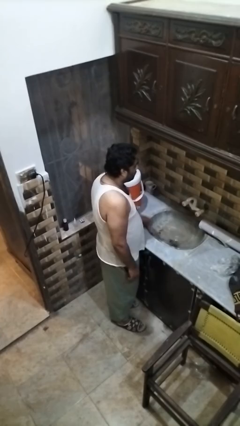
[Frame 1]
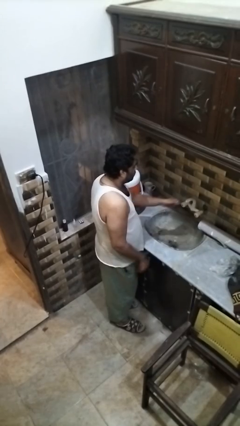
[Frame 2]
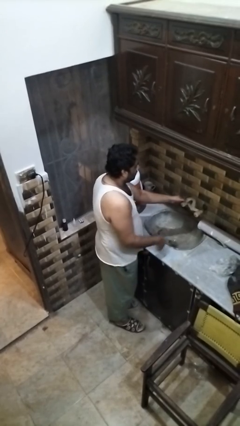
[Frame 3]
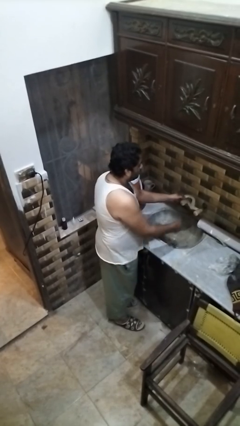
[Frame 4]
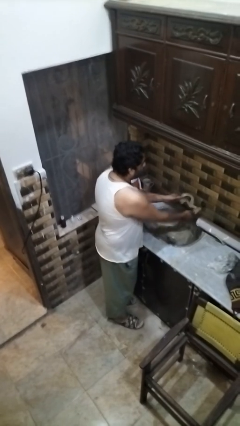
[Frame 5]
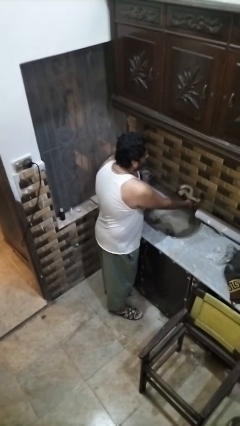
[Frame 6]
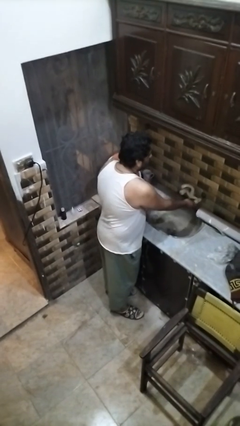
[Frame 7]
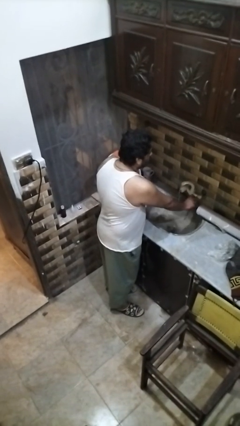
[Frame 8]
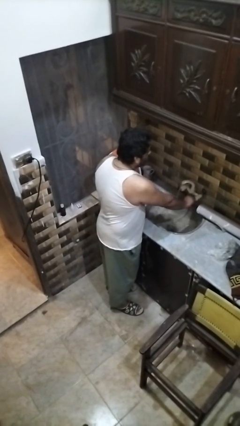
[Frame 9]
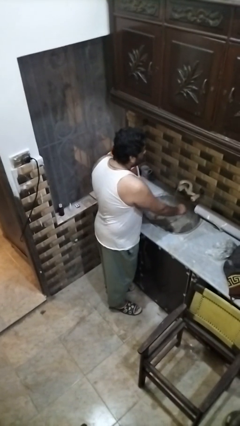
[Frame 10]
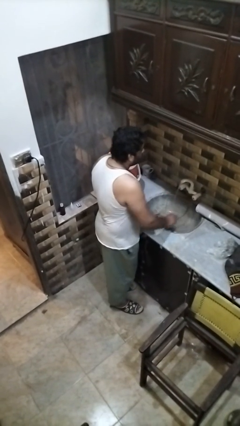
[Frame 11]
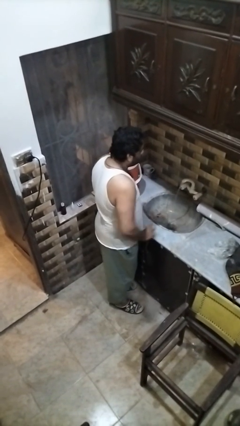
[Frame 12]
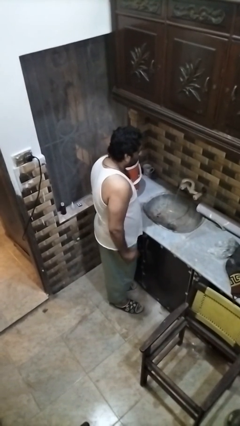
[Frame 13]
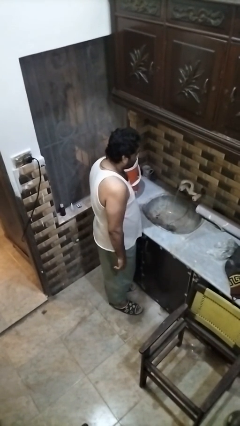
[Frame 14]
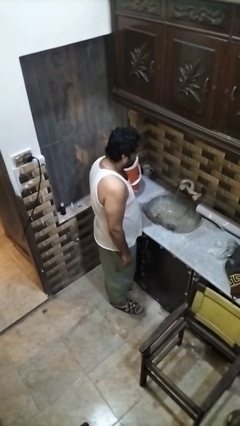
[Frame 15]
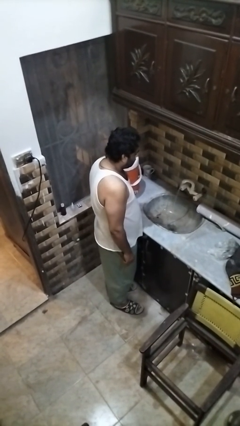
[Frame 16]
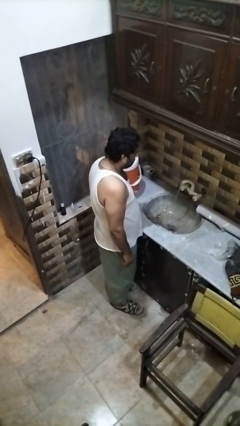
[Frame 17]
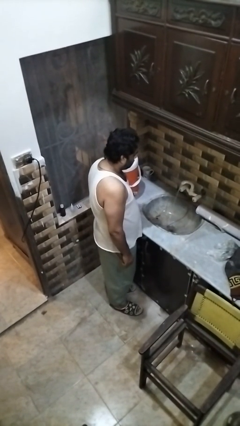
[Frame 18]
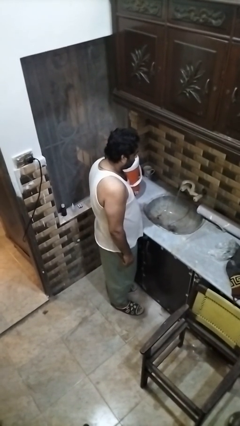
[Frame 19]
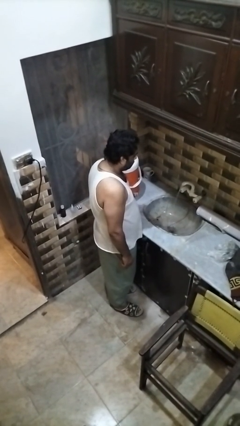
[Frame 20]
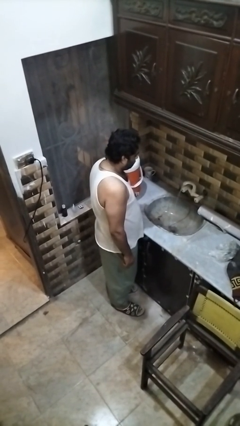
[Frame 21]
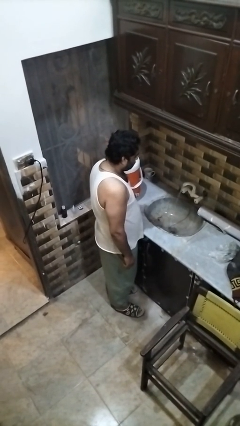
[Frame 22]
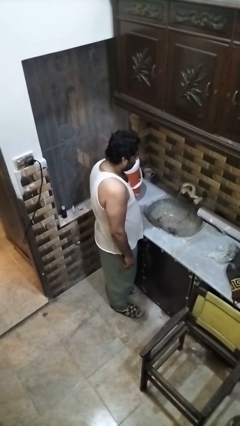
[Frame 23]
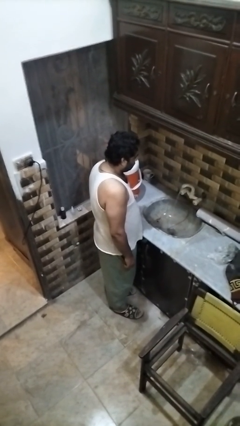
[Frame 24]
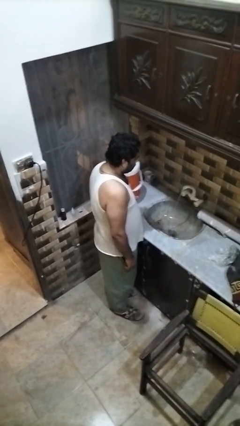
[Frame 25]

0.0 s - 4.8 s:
person turns on faucet

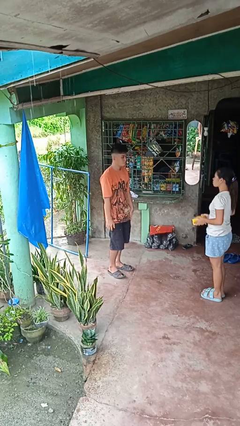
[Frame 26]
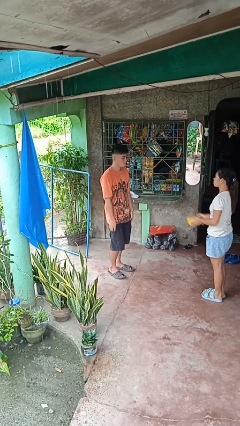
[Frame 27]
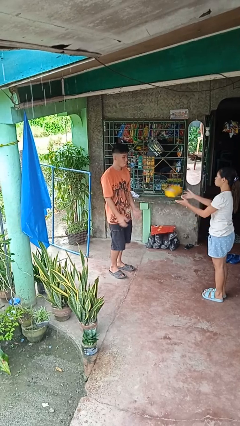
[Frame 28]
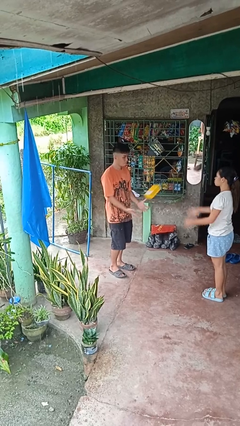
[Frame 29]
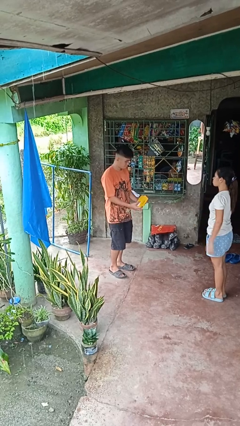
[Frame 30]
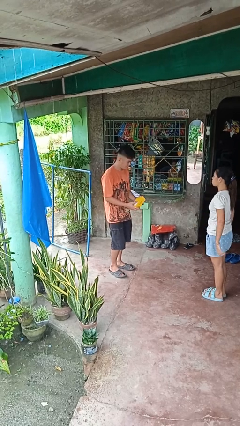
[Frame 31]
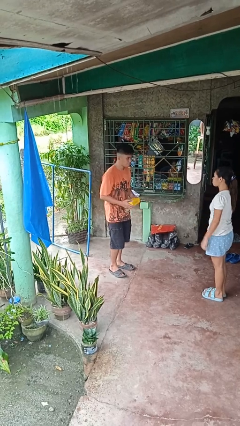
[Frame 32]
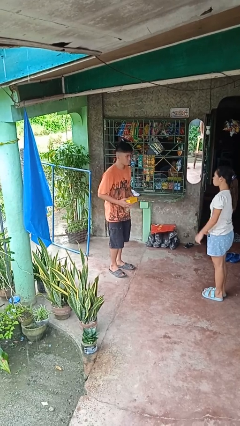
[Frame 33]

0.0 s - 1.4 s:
person catches object from person

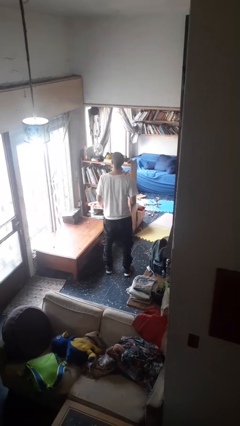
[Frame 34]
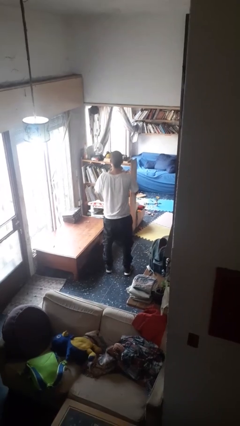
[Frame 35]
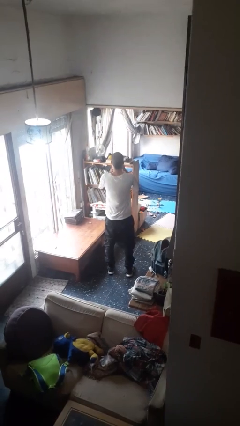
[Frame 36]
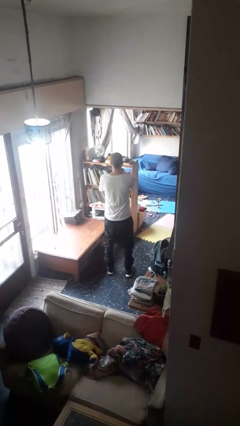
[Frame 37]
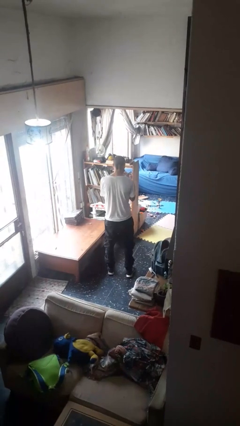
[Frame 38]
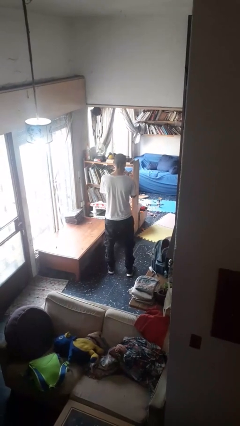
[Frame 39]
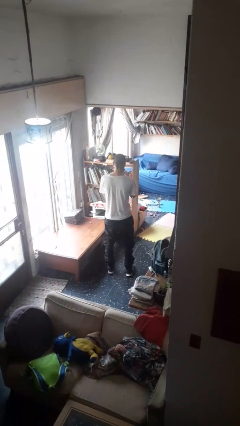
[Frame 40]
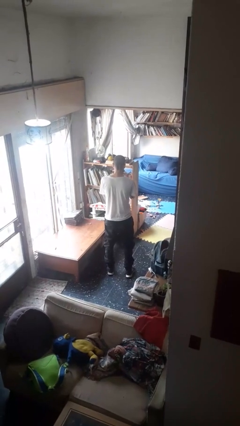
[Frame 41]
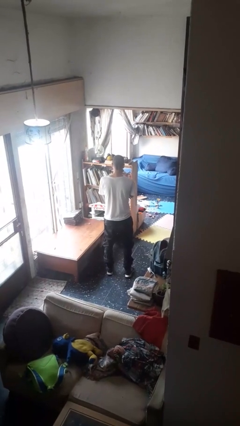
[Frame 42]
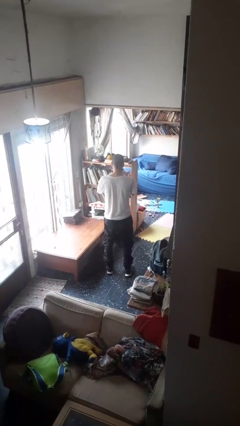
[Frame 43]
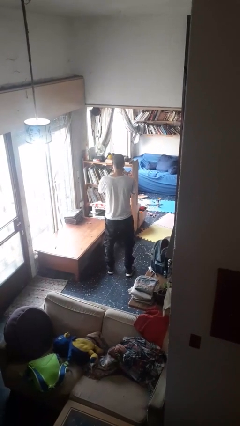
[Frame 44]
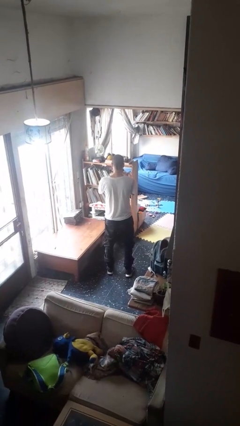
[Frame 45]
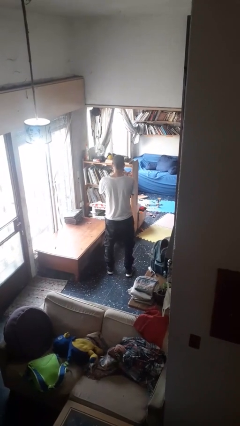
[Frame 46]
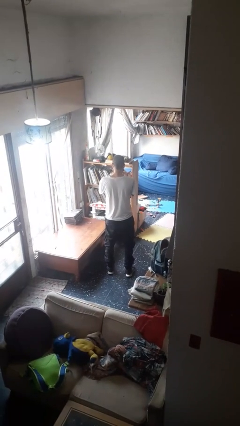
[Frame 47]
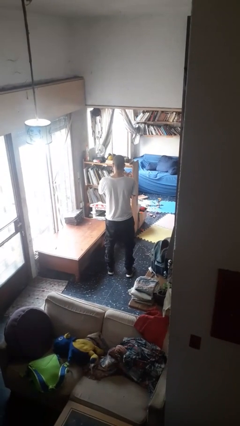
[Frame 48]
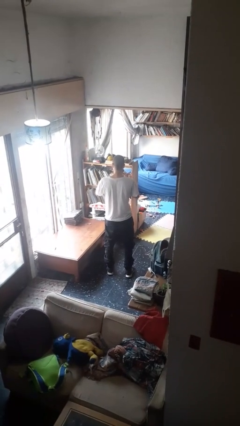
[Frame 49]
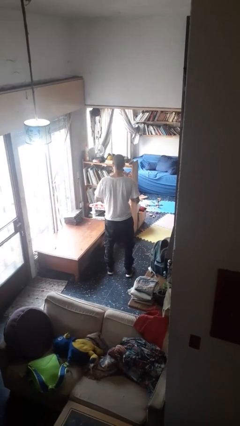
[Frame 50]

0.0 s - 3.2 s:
person sneezes into hand

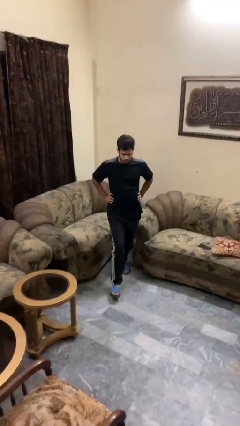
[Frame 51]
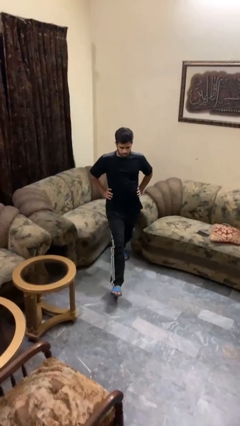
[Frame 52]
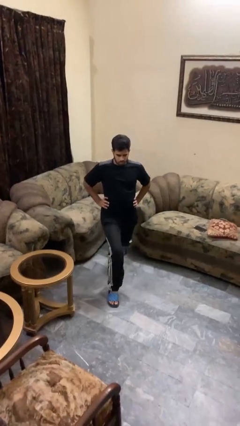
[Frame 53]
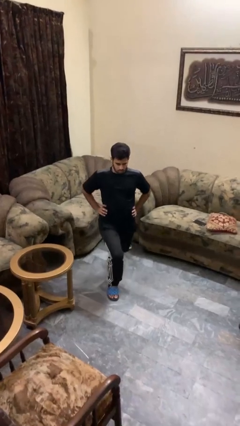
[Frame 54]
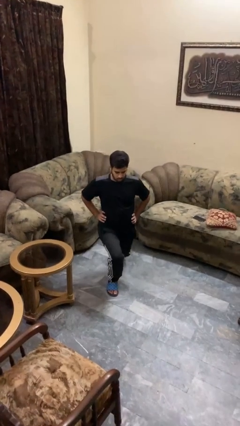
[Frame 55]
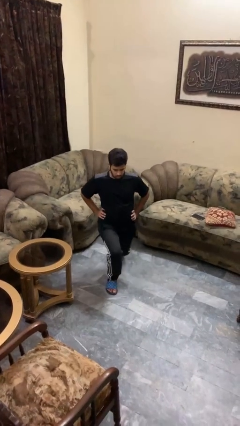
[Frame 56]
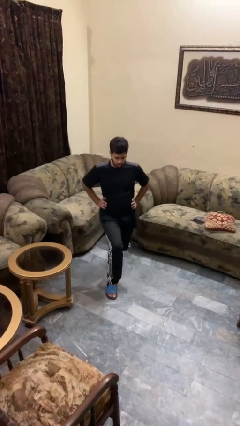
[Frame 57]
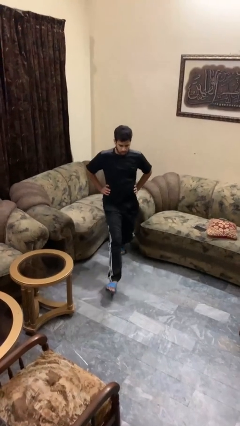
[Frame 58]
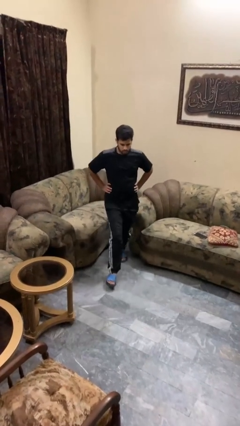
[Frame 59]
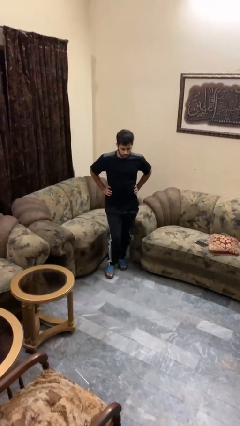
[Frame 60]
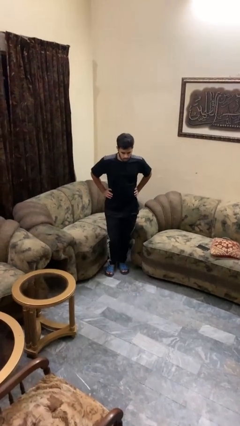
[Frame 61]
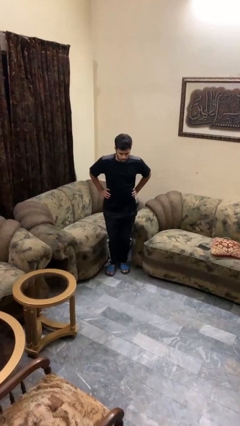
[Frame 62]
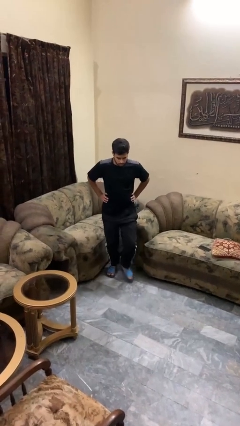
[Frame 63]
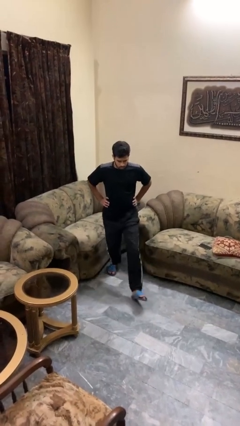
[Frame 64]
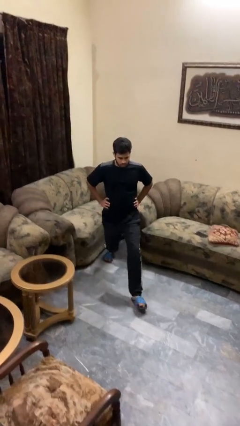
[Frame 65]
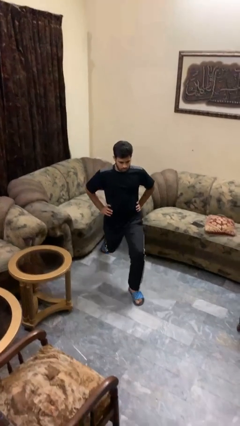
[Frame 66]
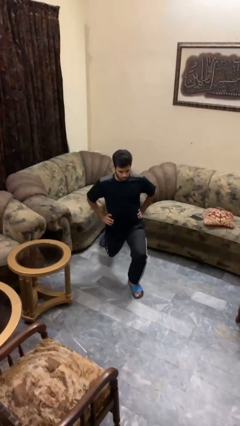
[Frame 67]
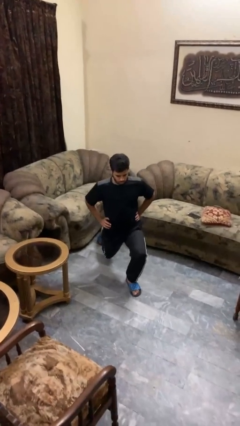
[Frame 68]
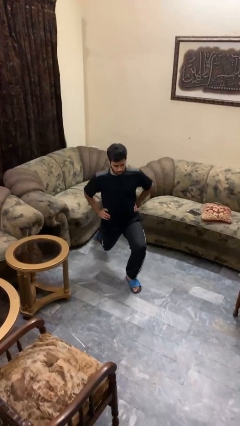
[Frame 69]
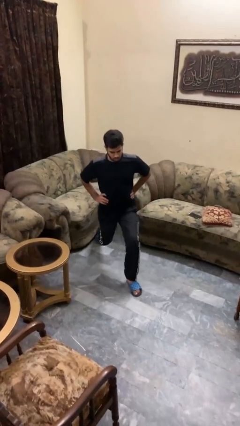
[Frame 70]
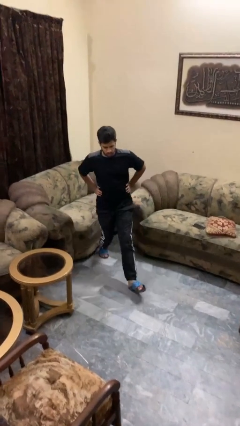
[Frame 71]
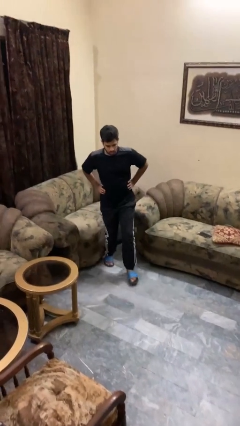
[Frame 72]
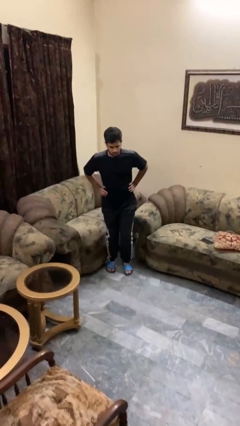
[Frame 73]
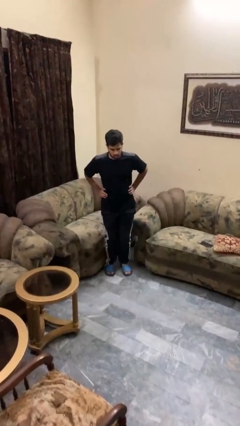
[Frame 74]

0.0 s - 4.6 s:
person exercises with lunges

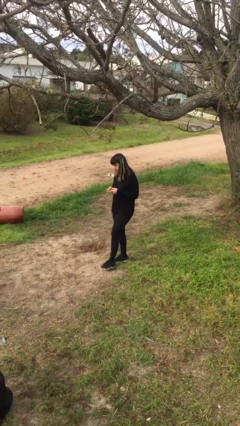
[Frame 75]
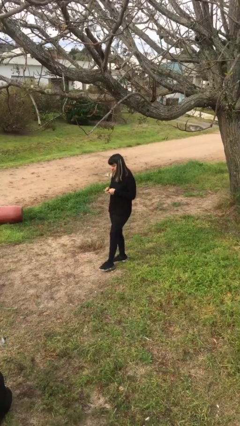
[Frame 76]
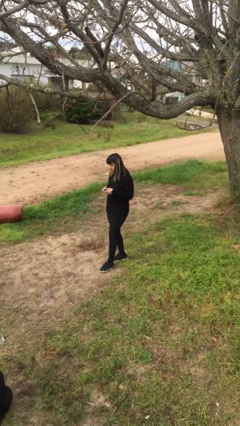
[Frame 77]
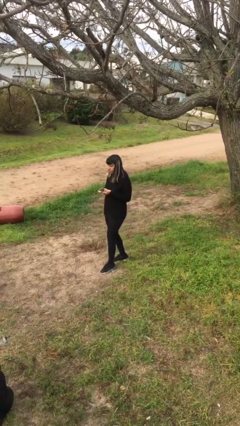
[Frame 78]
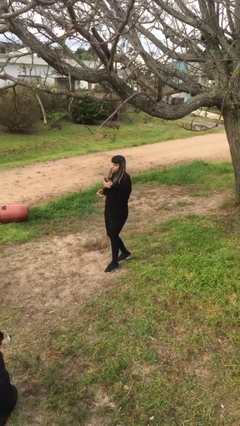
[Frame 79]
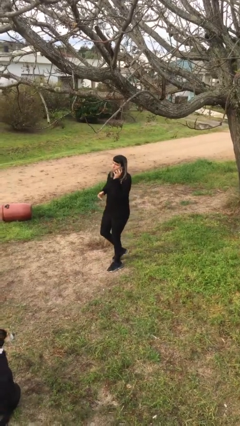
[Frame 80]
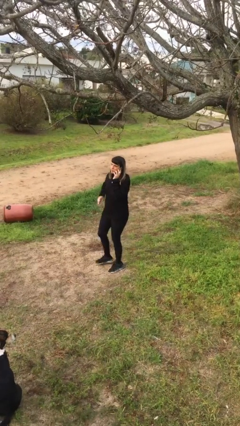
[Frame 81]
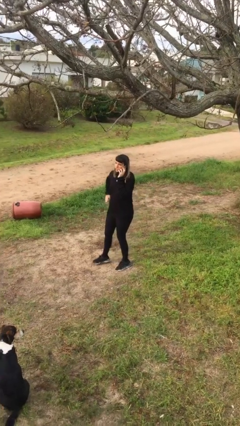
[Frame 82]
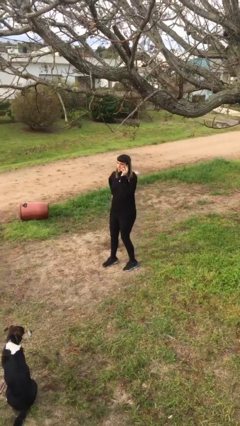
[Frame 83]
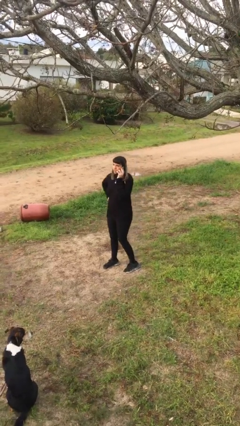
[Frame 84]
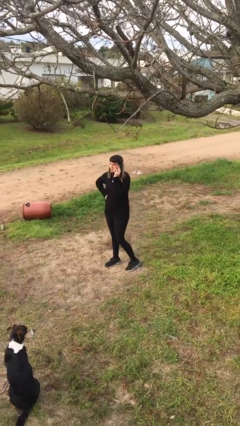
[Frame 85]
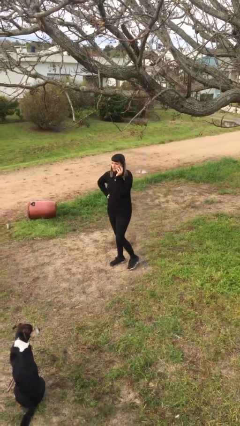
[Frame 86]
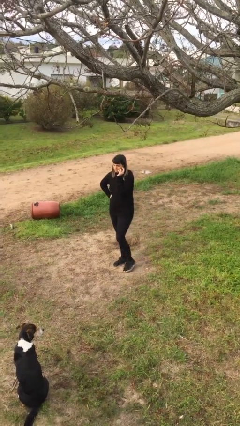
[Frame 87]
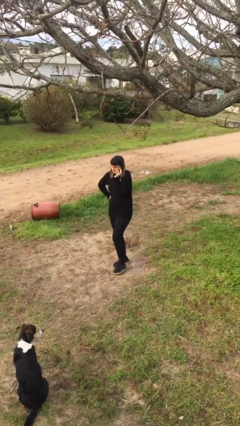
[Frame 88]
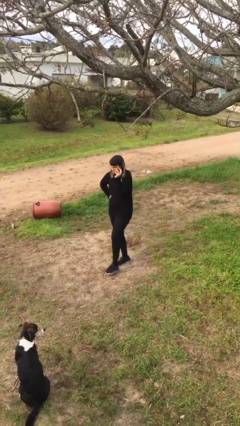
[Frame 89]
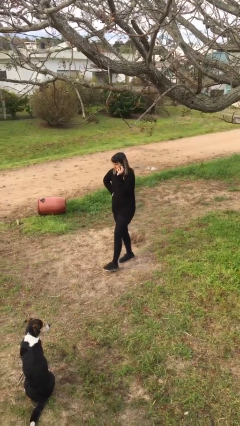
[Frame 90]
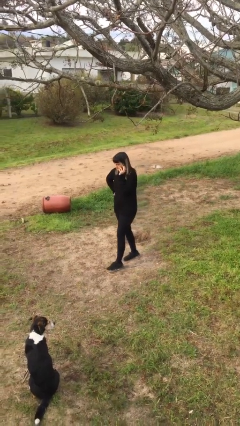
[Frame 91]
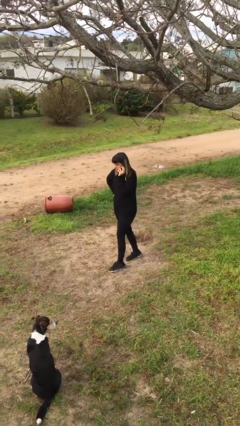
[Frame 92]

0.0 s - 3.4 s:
person talks on phone
